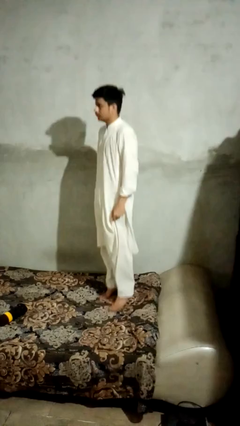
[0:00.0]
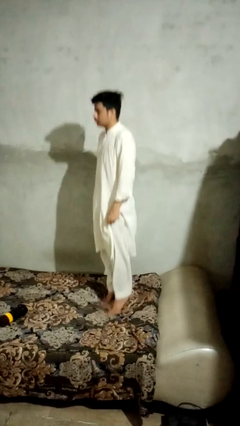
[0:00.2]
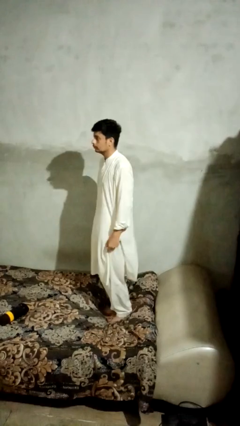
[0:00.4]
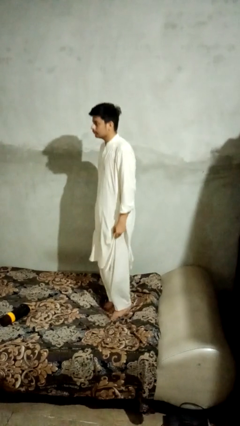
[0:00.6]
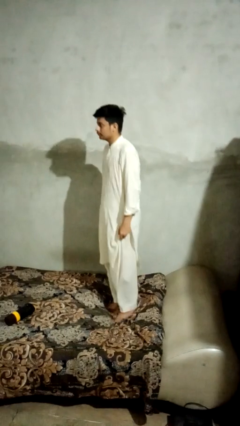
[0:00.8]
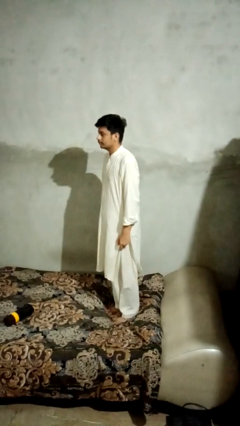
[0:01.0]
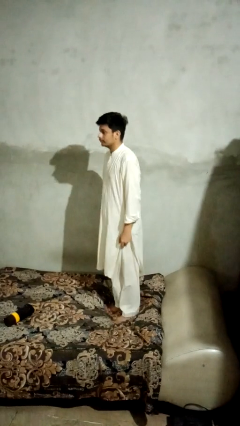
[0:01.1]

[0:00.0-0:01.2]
person jumps on bed

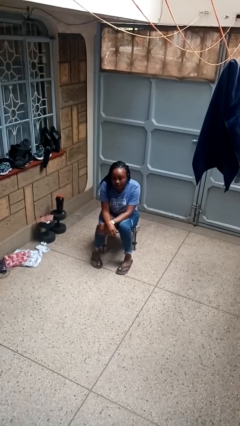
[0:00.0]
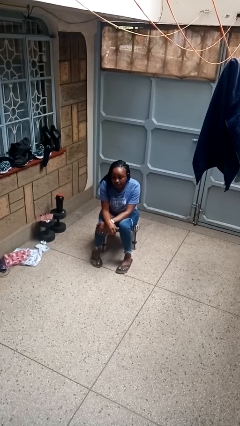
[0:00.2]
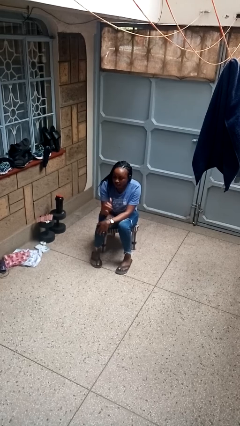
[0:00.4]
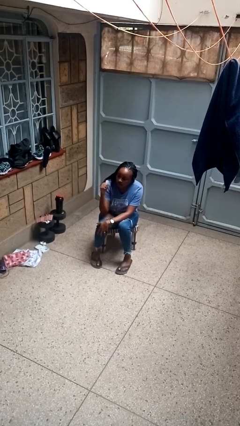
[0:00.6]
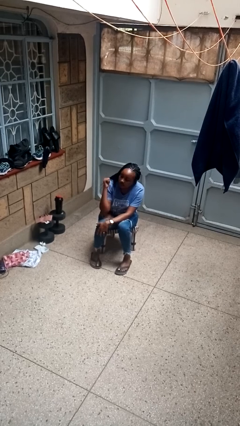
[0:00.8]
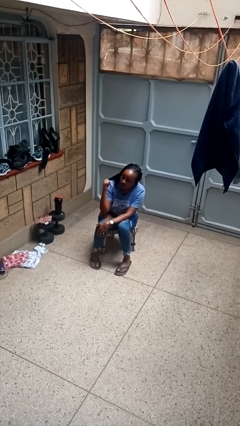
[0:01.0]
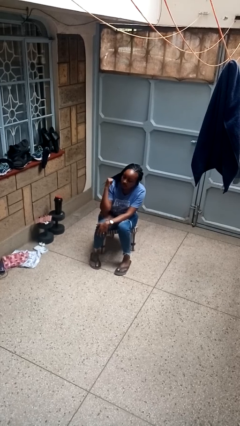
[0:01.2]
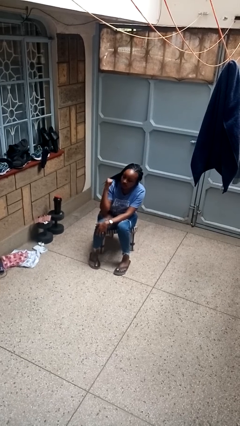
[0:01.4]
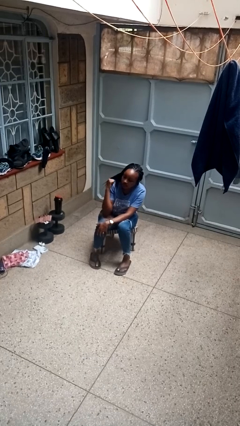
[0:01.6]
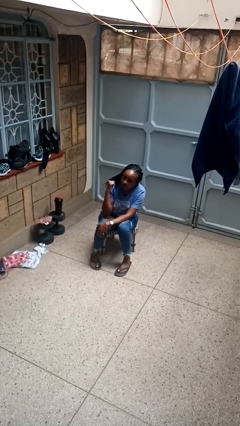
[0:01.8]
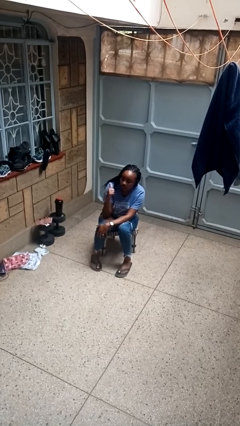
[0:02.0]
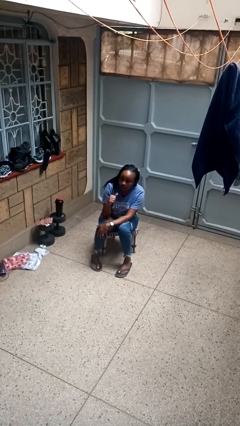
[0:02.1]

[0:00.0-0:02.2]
person gestures behind me

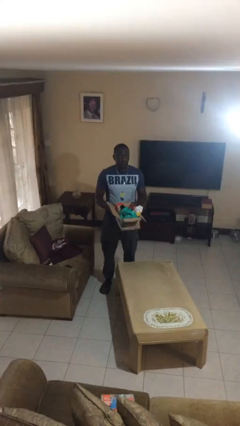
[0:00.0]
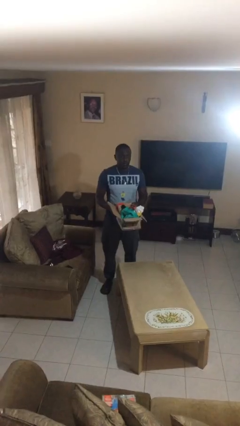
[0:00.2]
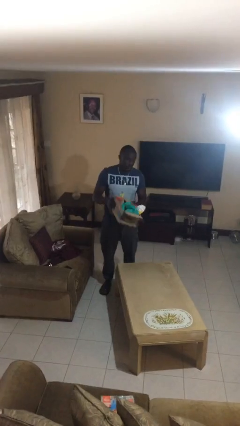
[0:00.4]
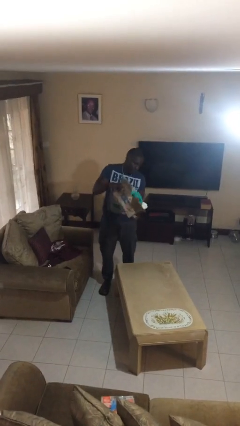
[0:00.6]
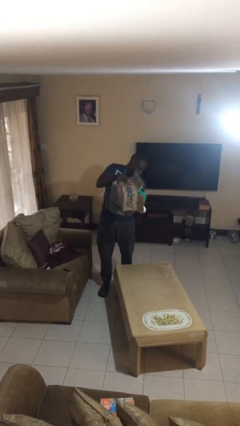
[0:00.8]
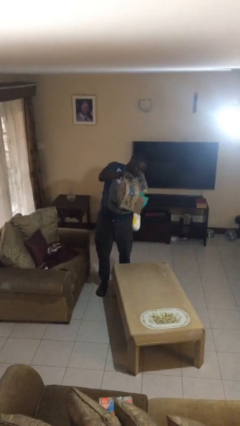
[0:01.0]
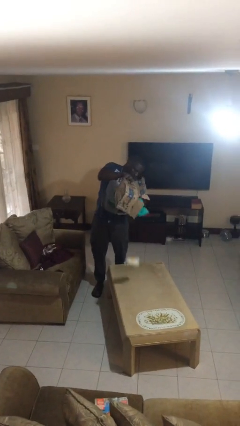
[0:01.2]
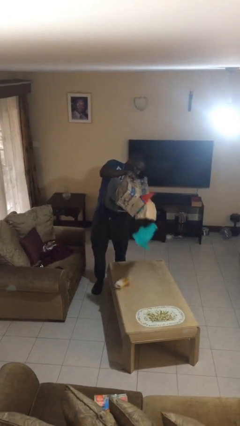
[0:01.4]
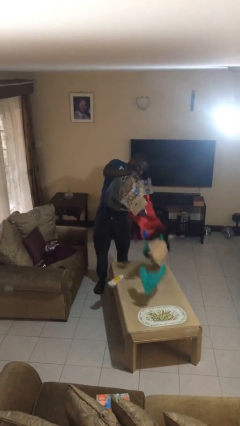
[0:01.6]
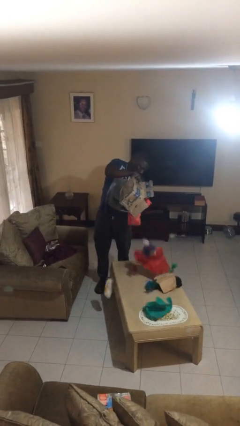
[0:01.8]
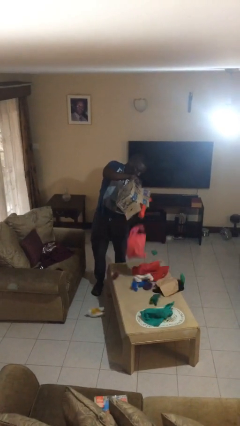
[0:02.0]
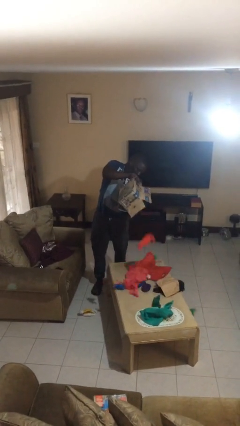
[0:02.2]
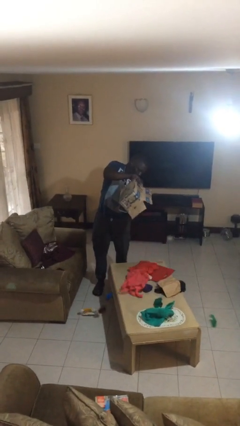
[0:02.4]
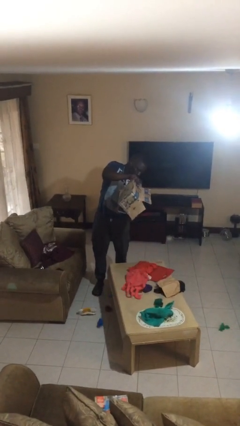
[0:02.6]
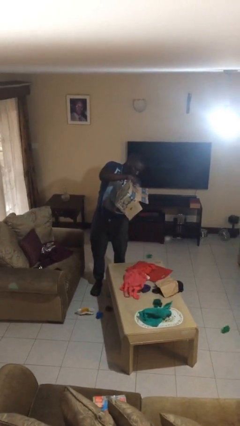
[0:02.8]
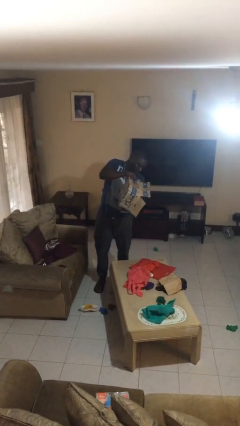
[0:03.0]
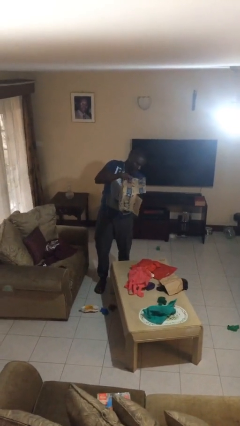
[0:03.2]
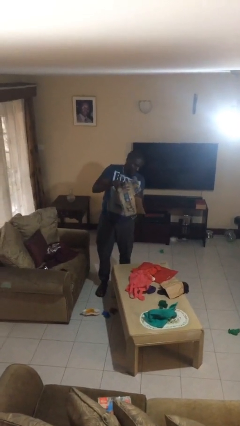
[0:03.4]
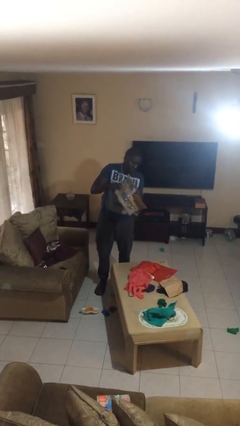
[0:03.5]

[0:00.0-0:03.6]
person unloads box onto table

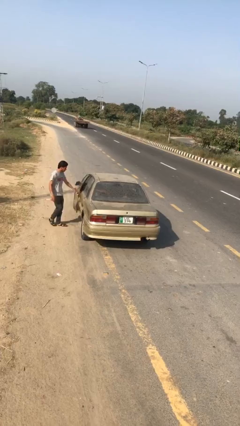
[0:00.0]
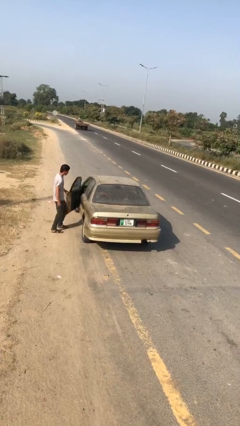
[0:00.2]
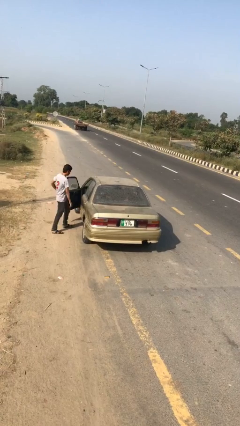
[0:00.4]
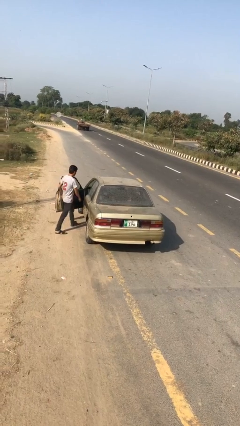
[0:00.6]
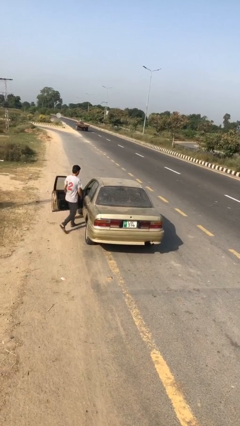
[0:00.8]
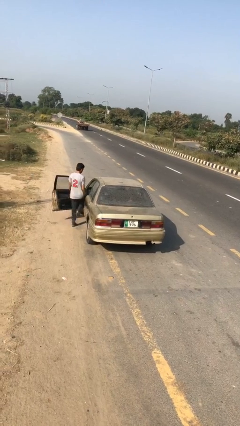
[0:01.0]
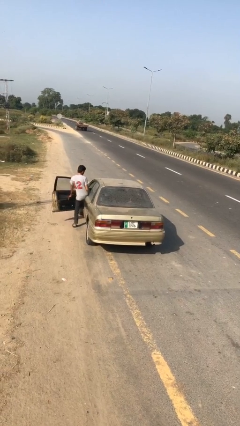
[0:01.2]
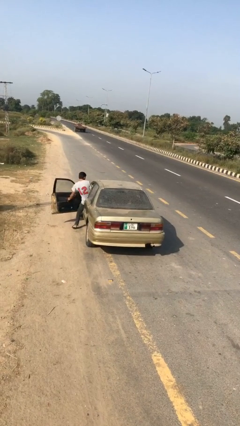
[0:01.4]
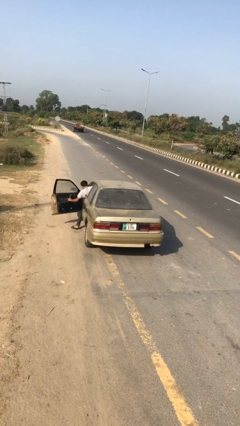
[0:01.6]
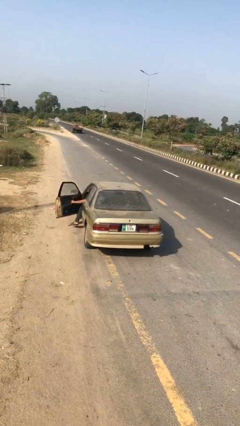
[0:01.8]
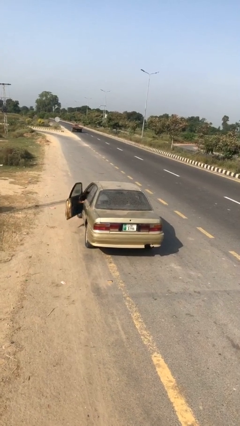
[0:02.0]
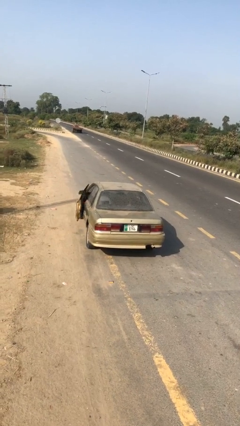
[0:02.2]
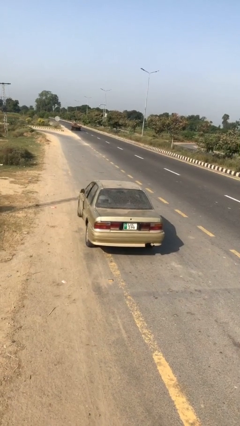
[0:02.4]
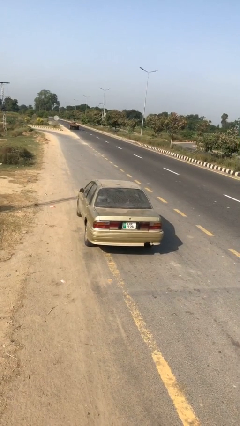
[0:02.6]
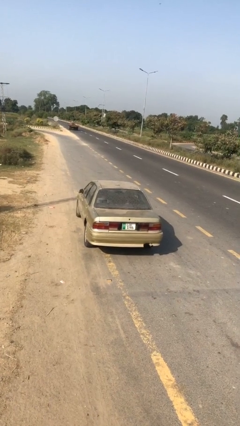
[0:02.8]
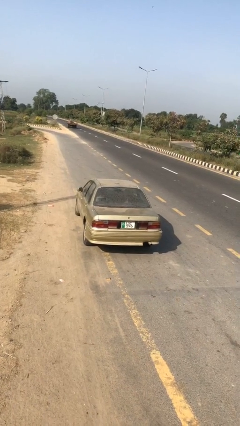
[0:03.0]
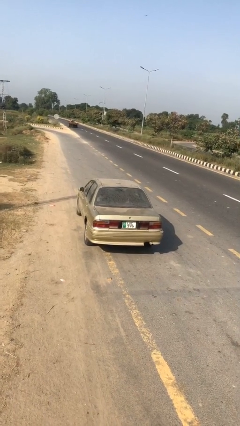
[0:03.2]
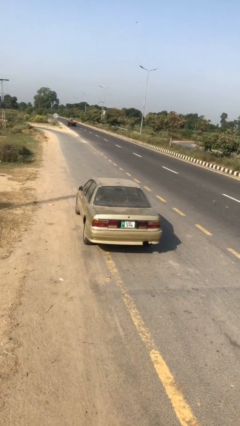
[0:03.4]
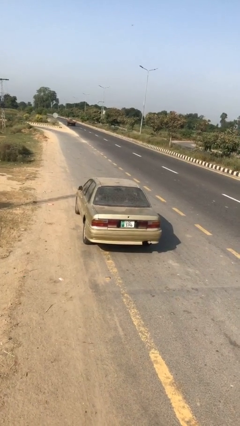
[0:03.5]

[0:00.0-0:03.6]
car picks up person

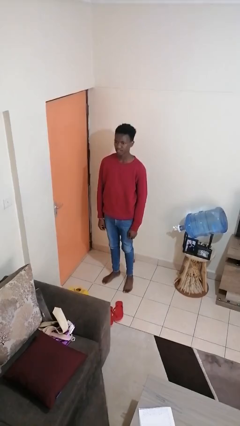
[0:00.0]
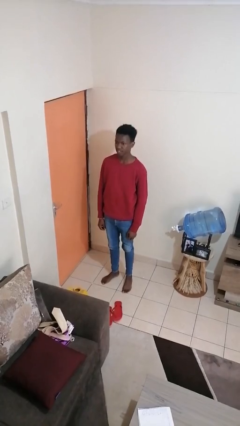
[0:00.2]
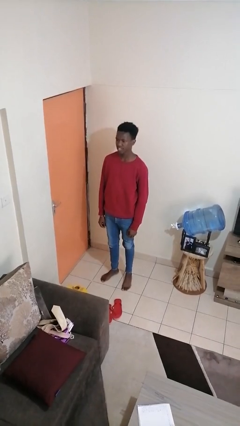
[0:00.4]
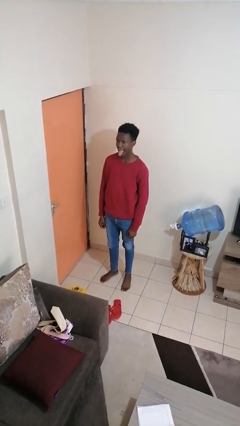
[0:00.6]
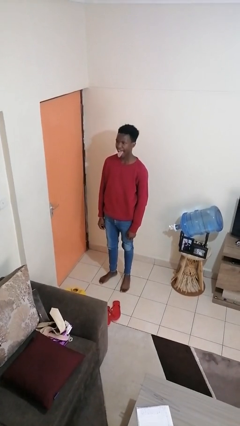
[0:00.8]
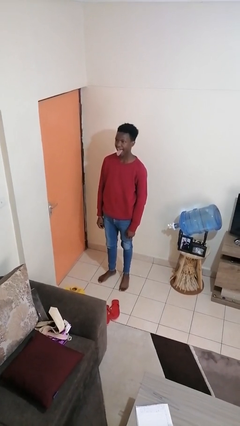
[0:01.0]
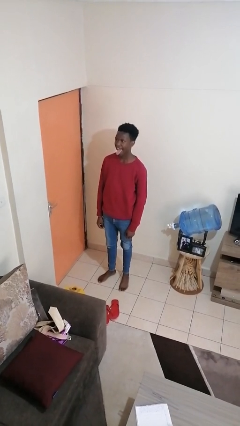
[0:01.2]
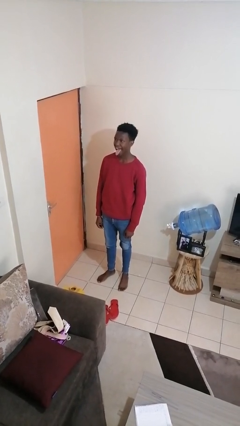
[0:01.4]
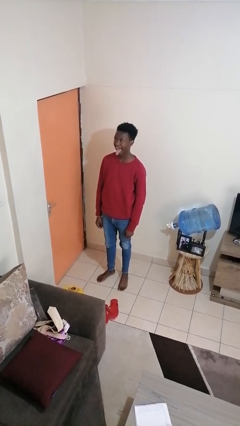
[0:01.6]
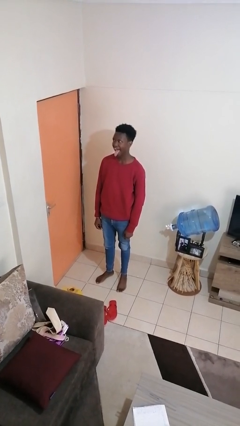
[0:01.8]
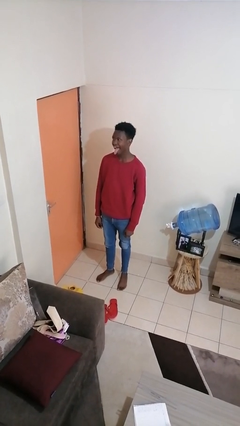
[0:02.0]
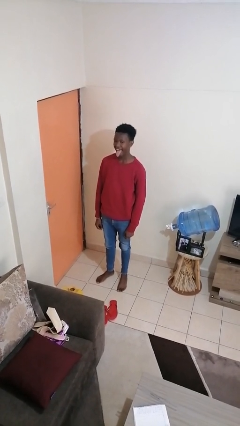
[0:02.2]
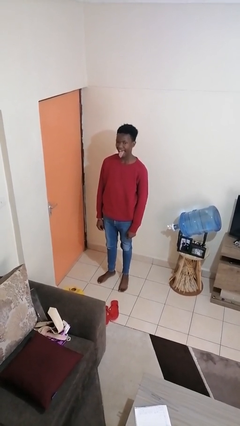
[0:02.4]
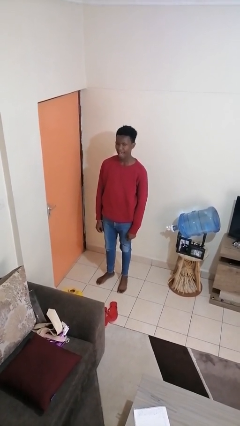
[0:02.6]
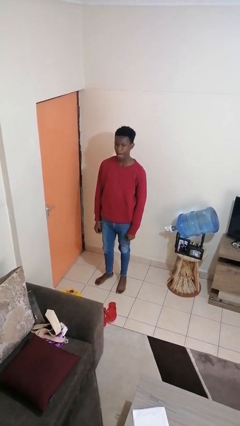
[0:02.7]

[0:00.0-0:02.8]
person sticks out tongue

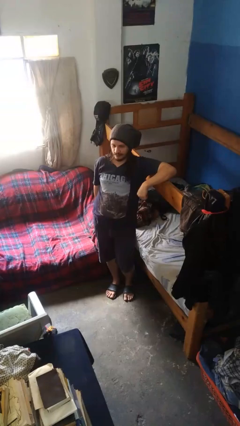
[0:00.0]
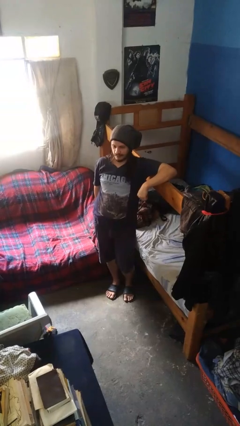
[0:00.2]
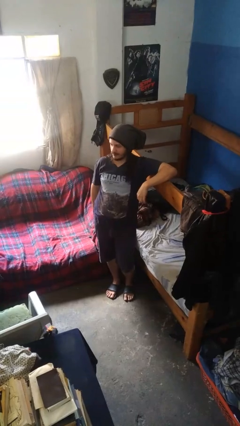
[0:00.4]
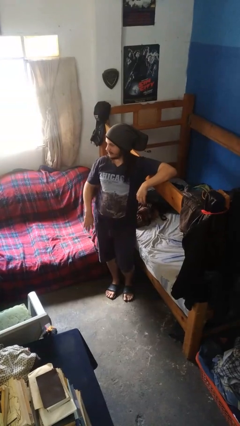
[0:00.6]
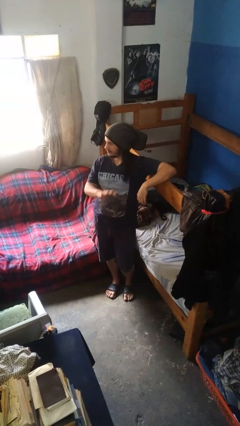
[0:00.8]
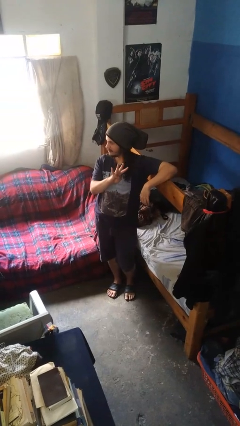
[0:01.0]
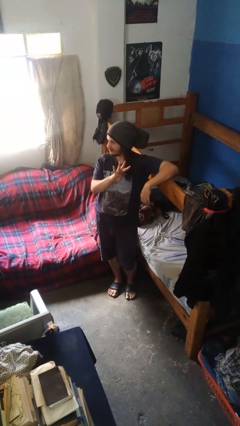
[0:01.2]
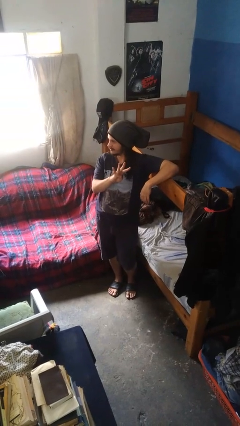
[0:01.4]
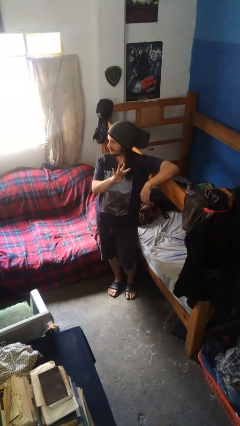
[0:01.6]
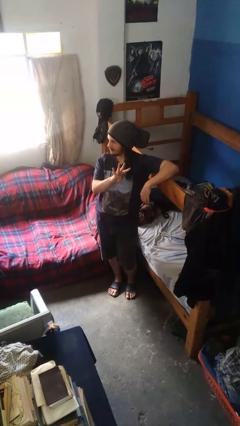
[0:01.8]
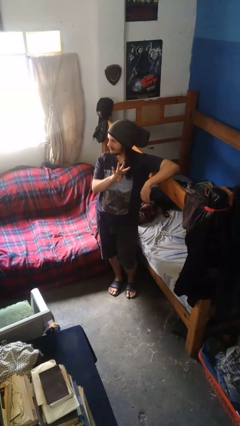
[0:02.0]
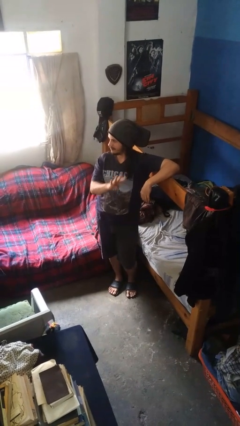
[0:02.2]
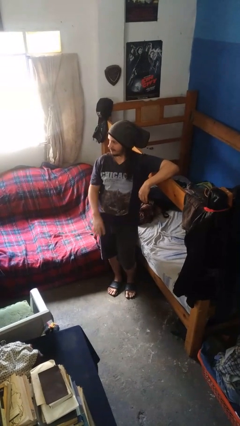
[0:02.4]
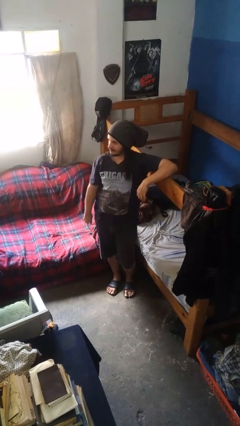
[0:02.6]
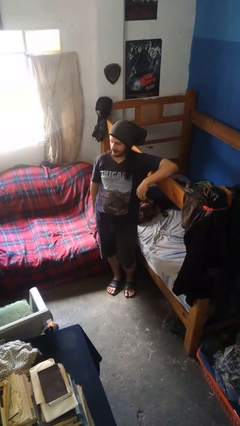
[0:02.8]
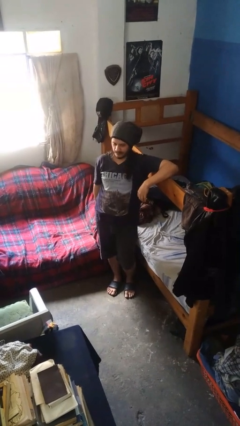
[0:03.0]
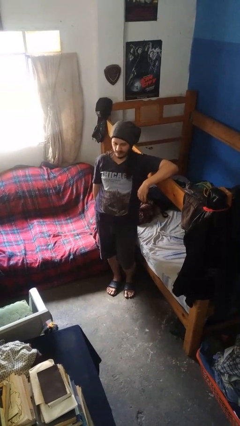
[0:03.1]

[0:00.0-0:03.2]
person gestures number four

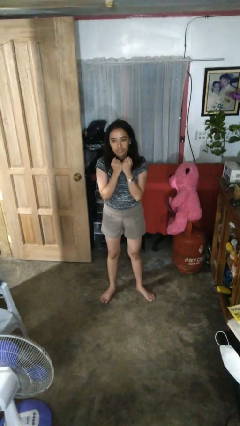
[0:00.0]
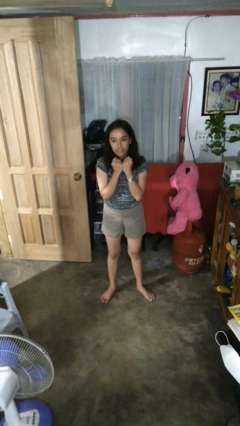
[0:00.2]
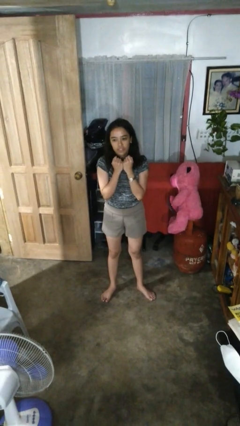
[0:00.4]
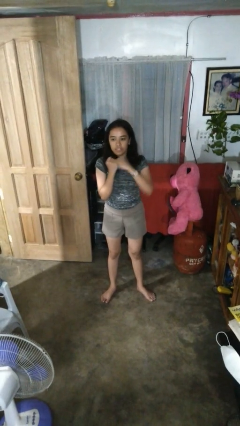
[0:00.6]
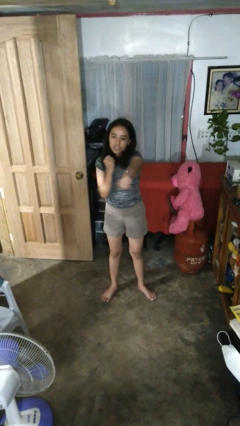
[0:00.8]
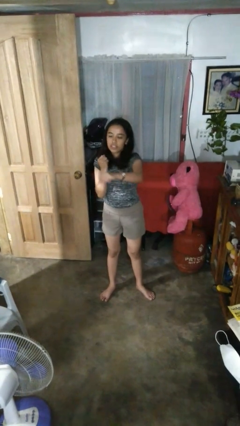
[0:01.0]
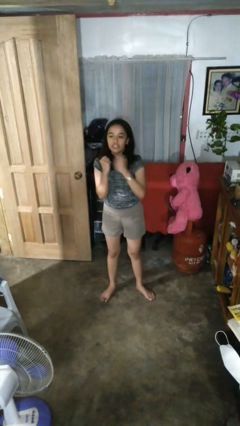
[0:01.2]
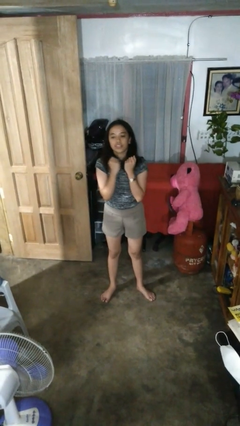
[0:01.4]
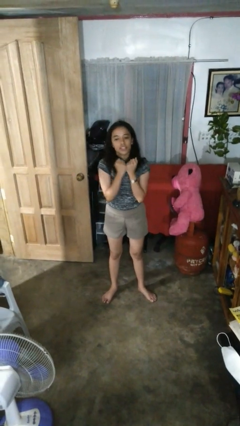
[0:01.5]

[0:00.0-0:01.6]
person punches
